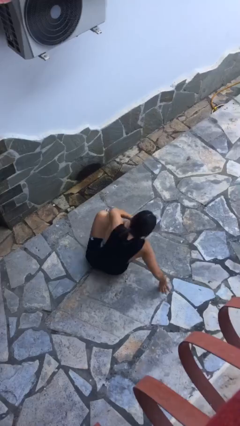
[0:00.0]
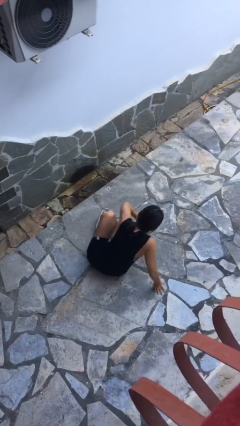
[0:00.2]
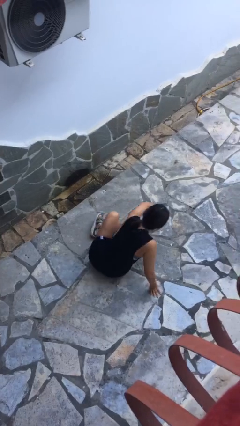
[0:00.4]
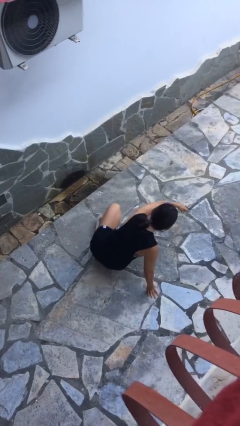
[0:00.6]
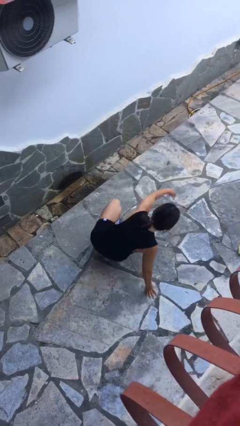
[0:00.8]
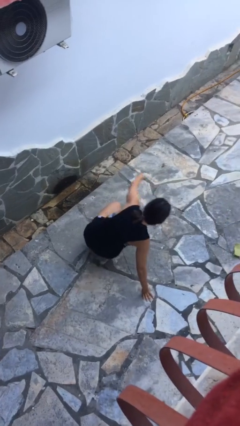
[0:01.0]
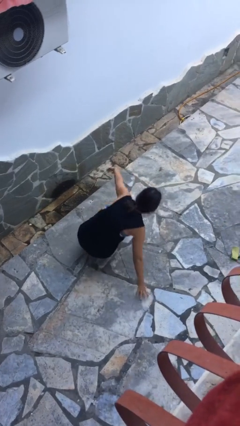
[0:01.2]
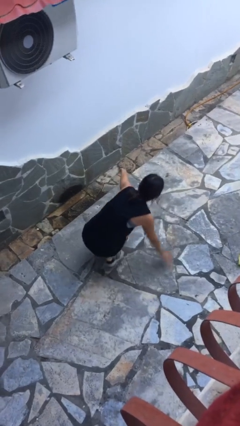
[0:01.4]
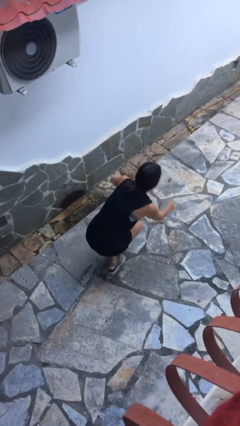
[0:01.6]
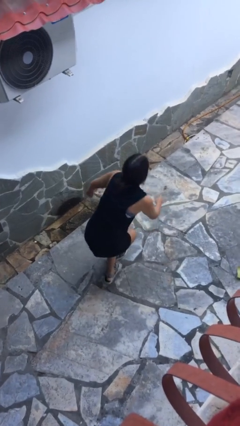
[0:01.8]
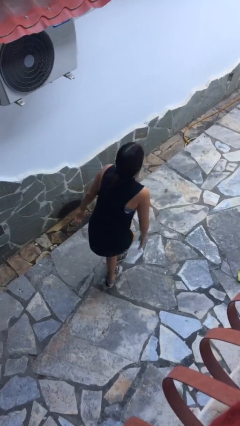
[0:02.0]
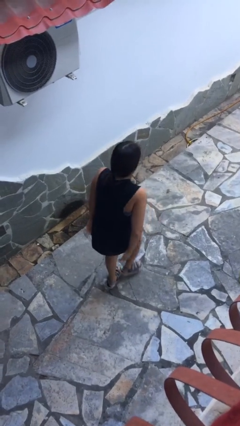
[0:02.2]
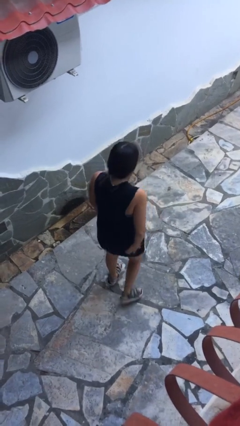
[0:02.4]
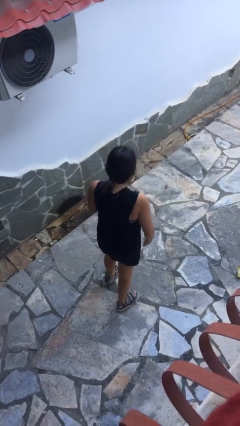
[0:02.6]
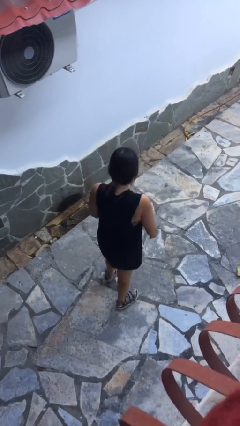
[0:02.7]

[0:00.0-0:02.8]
person stands up from floor

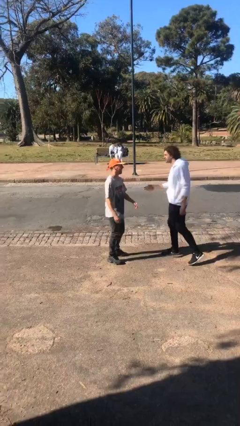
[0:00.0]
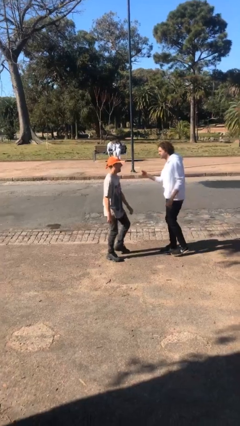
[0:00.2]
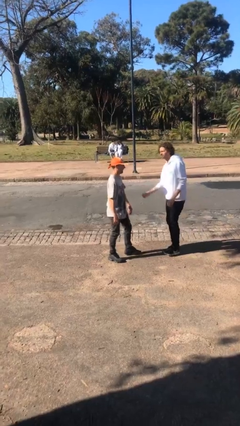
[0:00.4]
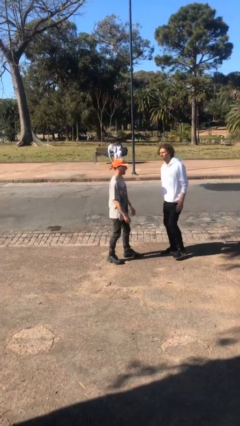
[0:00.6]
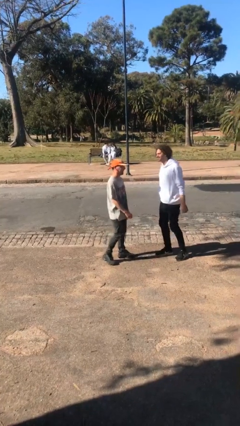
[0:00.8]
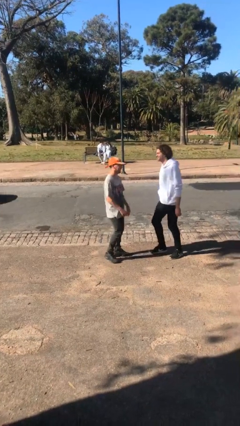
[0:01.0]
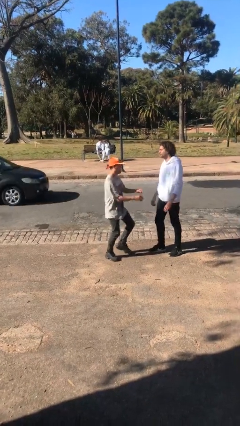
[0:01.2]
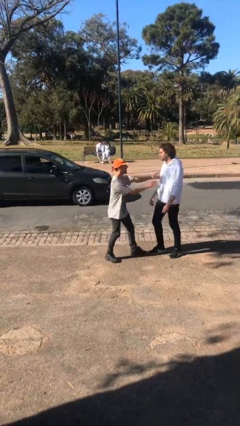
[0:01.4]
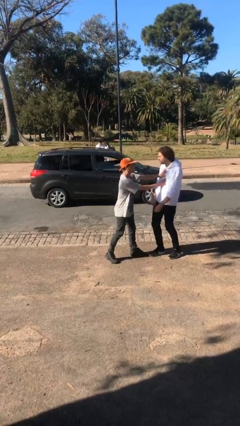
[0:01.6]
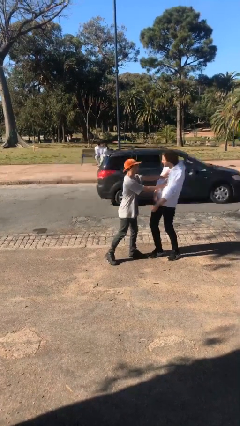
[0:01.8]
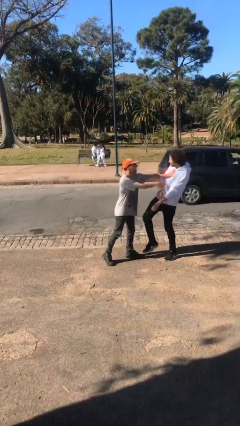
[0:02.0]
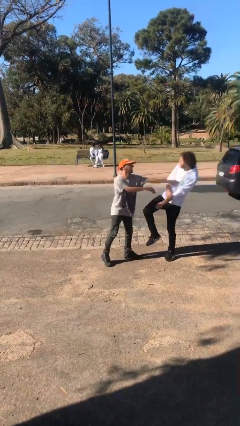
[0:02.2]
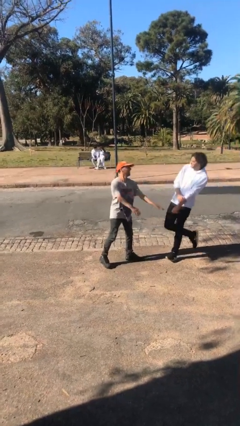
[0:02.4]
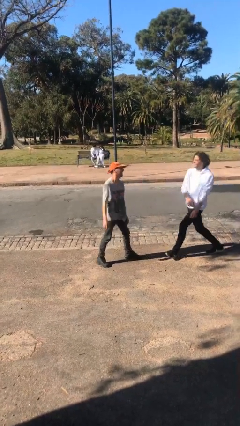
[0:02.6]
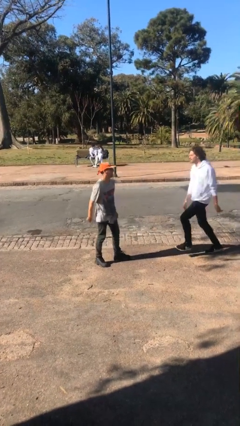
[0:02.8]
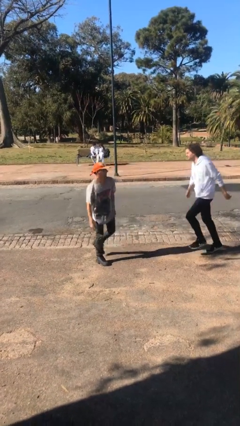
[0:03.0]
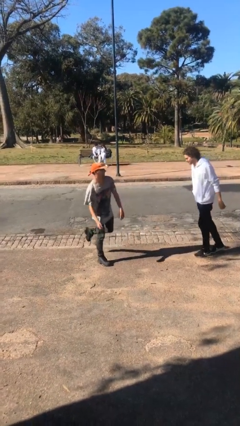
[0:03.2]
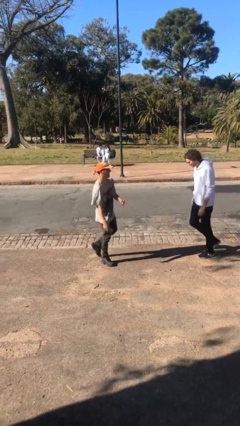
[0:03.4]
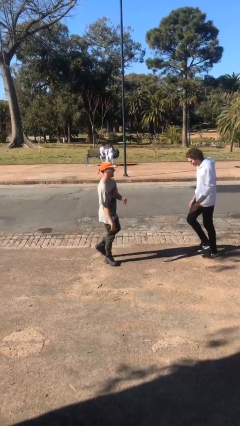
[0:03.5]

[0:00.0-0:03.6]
person shoves person

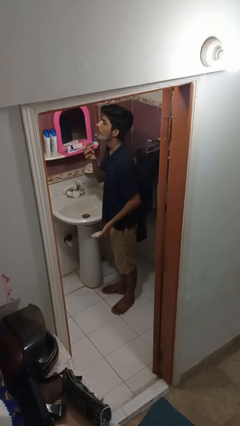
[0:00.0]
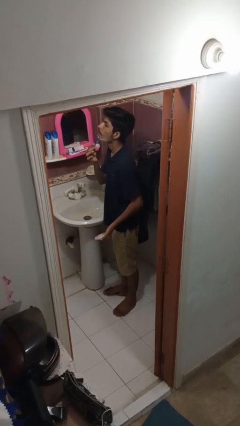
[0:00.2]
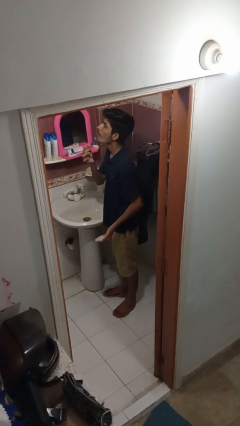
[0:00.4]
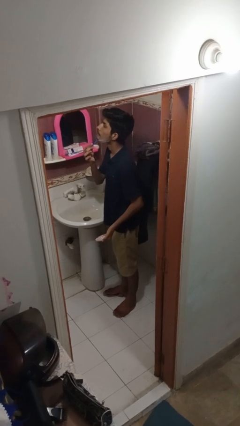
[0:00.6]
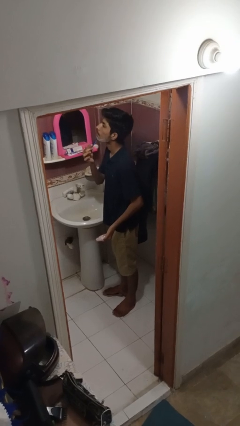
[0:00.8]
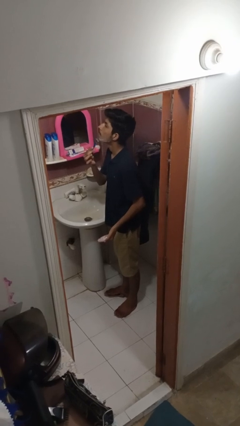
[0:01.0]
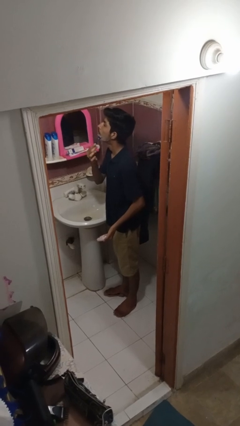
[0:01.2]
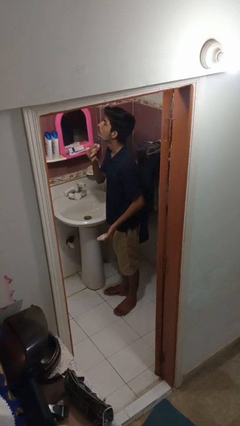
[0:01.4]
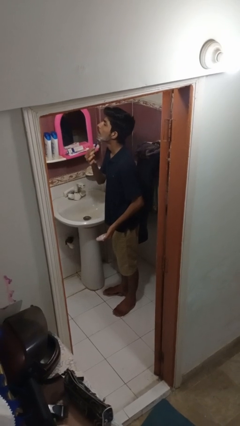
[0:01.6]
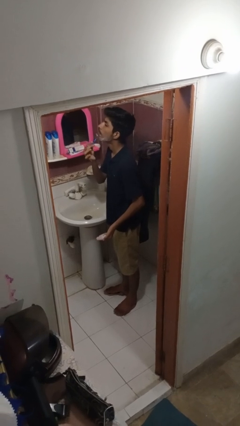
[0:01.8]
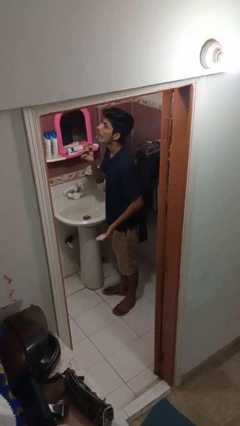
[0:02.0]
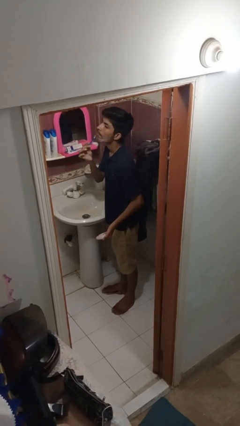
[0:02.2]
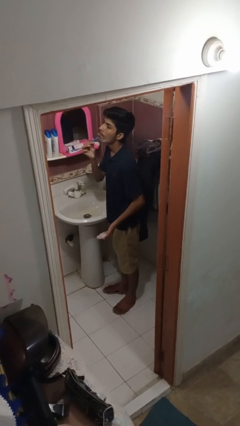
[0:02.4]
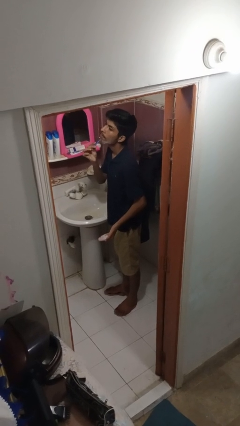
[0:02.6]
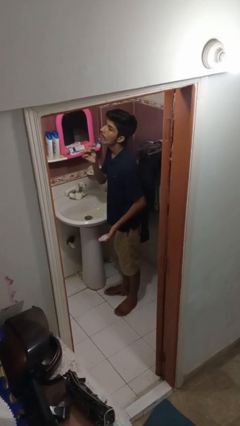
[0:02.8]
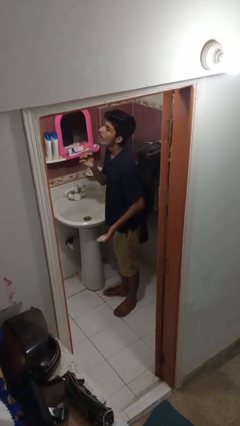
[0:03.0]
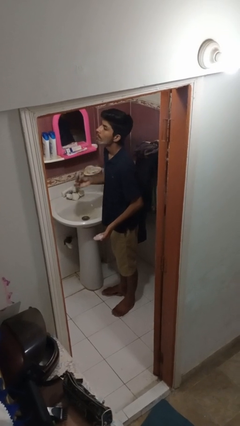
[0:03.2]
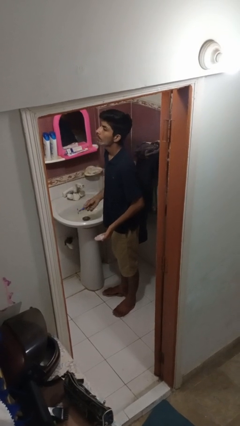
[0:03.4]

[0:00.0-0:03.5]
person shaves face

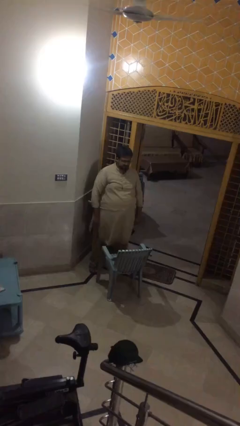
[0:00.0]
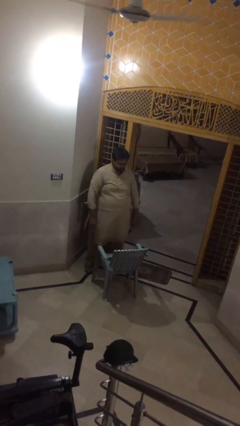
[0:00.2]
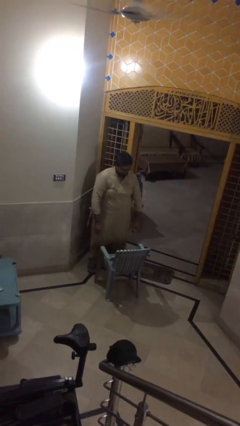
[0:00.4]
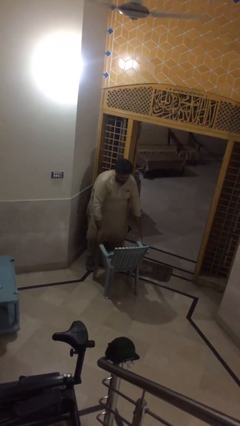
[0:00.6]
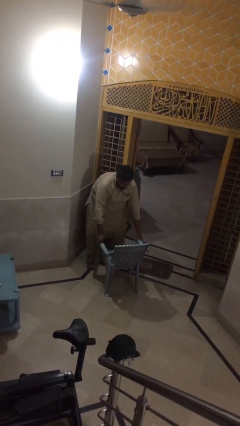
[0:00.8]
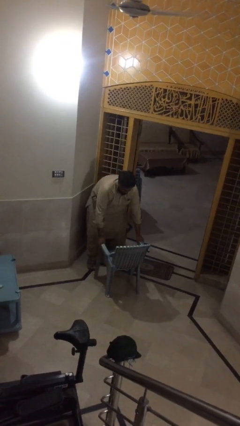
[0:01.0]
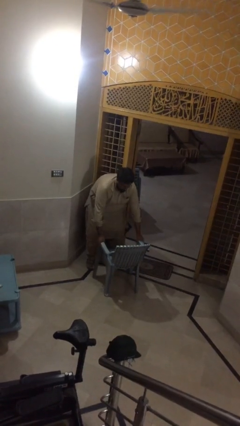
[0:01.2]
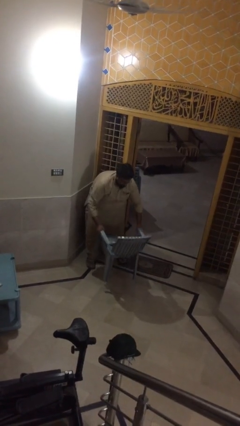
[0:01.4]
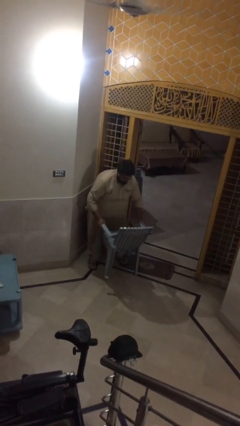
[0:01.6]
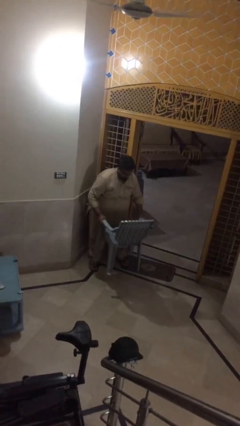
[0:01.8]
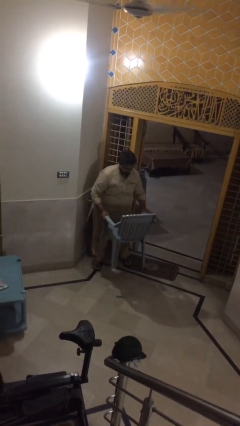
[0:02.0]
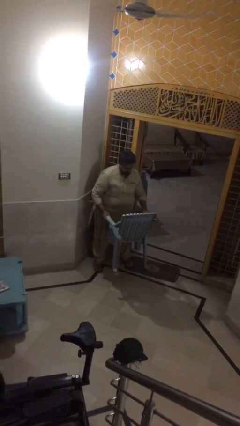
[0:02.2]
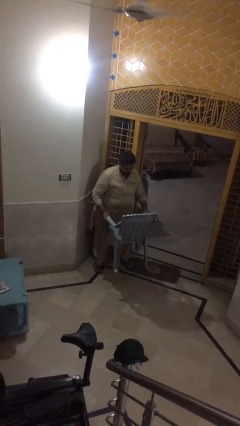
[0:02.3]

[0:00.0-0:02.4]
person picks up object from floor

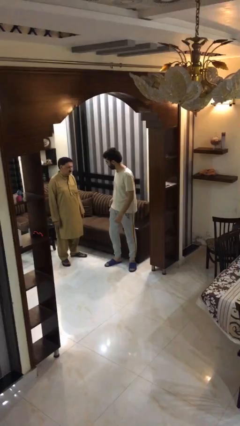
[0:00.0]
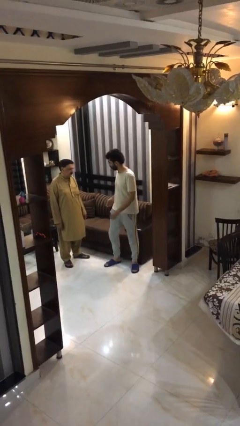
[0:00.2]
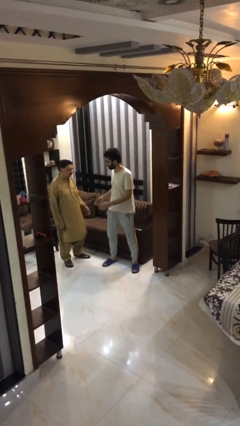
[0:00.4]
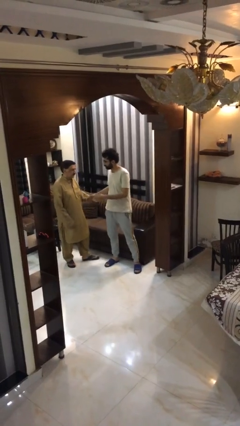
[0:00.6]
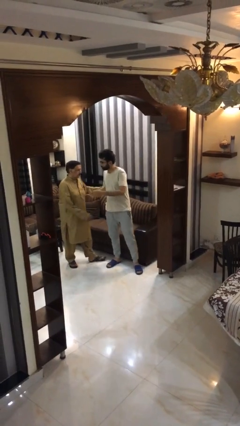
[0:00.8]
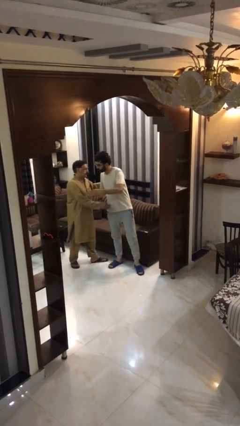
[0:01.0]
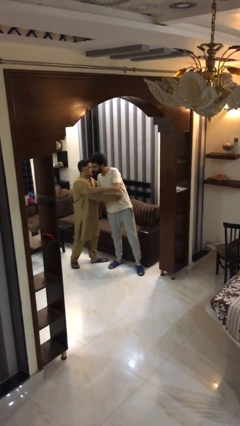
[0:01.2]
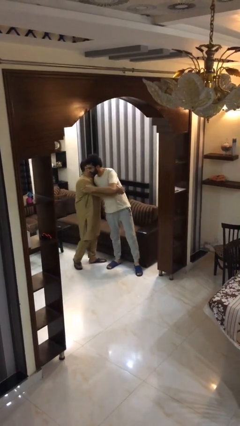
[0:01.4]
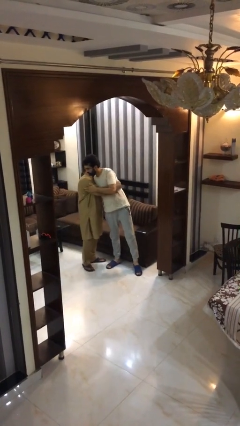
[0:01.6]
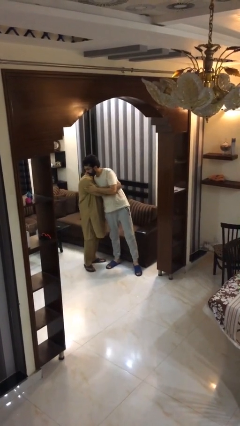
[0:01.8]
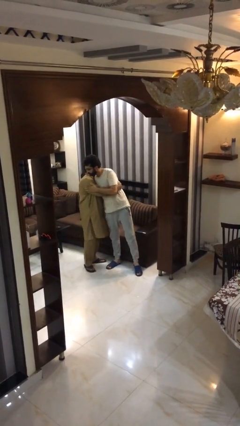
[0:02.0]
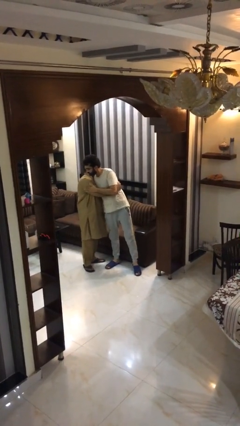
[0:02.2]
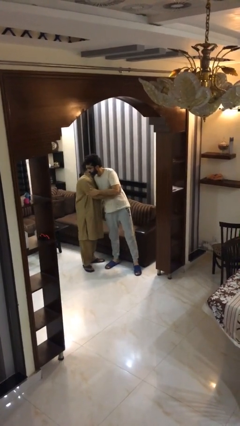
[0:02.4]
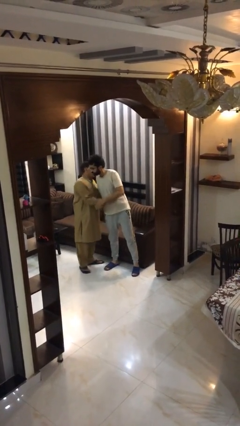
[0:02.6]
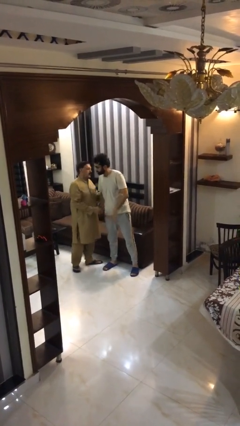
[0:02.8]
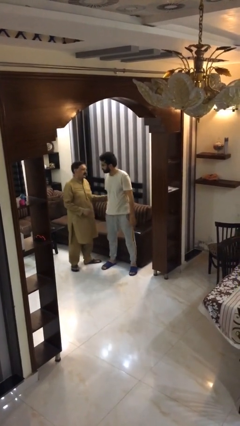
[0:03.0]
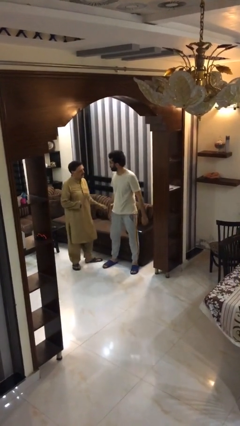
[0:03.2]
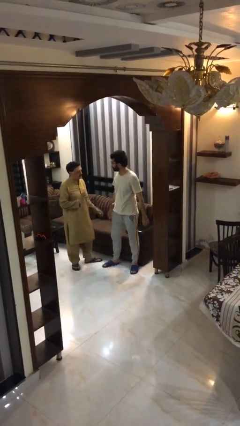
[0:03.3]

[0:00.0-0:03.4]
person embraces person

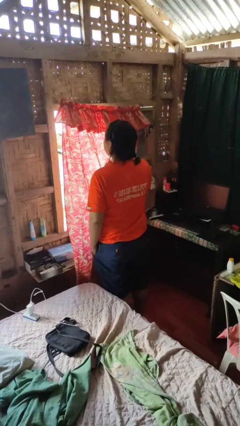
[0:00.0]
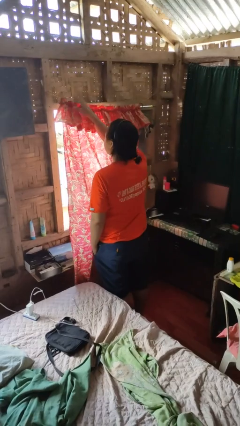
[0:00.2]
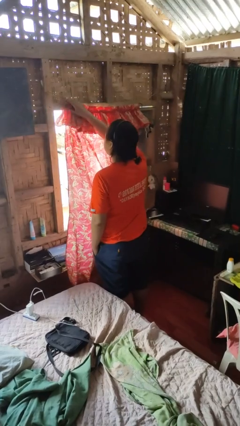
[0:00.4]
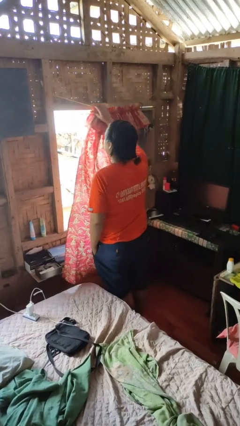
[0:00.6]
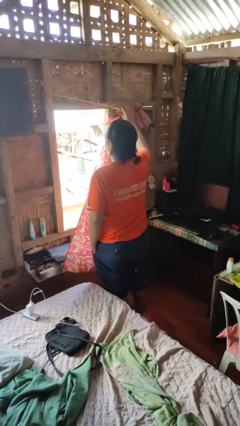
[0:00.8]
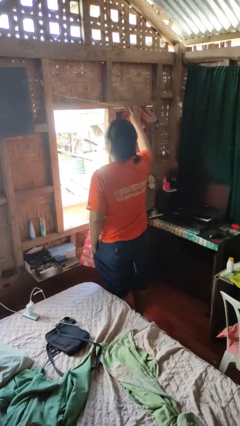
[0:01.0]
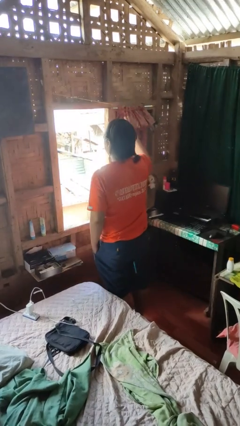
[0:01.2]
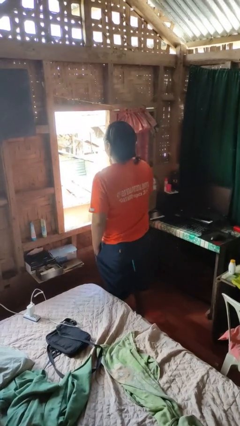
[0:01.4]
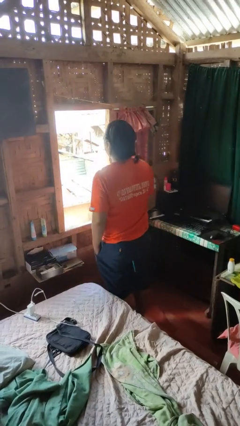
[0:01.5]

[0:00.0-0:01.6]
person opens curtains

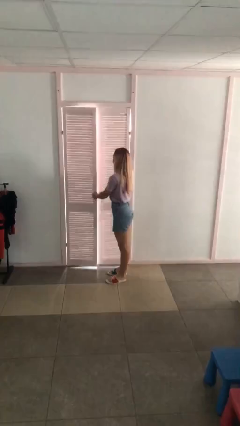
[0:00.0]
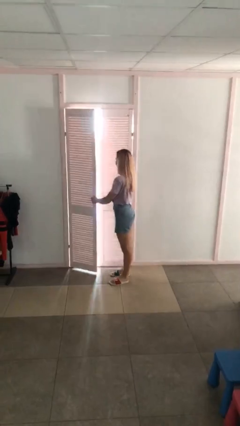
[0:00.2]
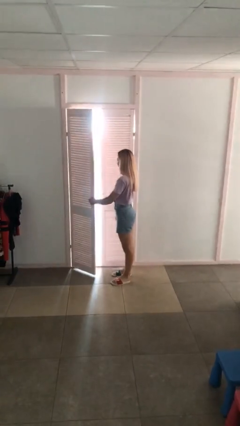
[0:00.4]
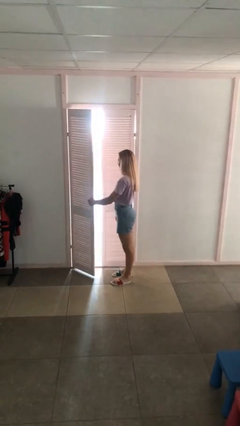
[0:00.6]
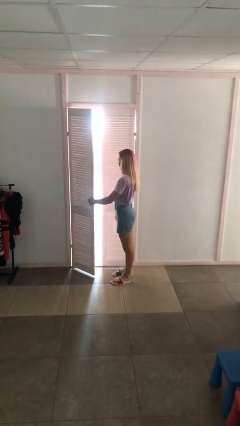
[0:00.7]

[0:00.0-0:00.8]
person opens facility door
